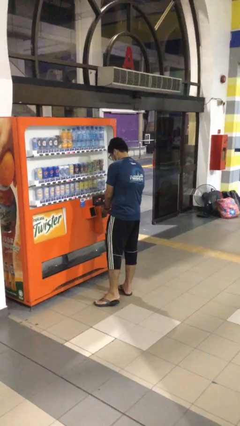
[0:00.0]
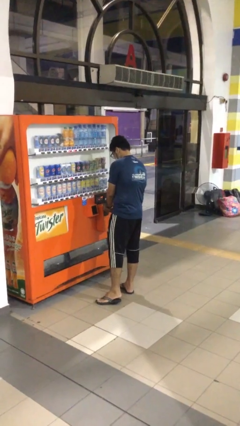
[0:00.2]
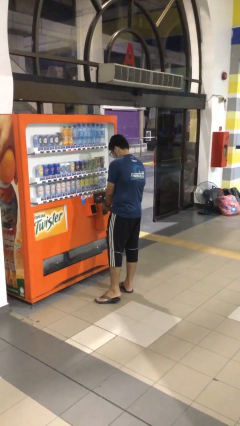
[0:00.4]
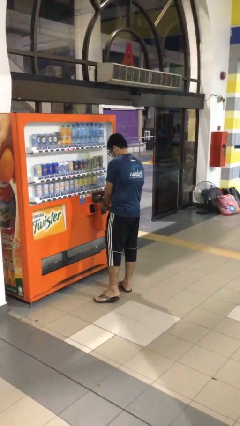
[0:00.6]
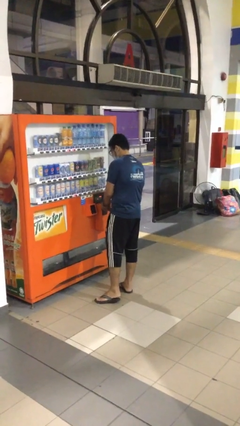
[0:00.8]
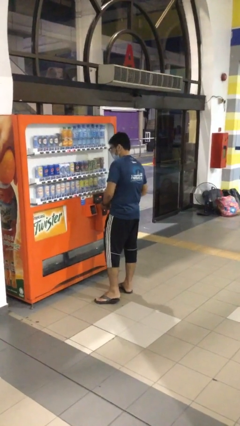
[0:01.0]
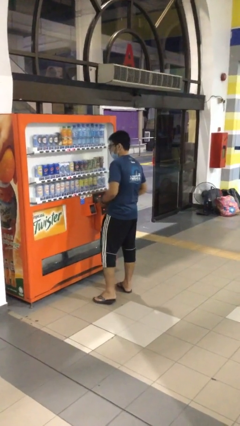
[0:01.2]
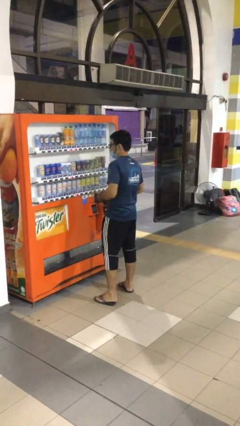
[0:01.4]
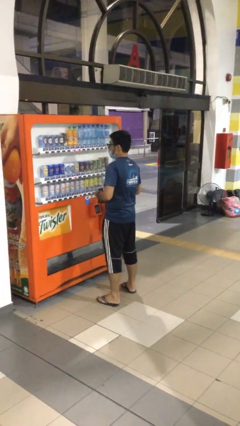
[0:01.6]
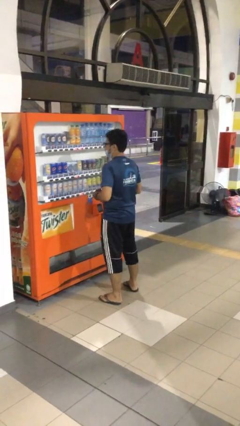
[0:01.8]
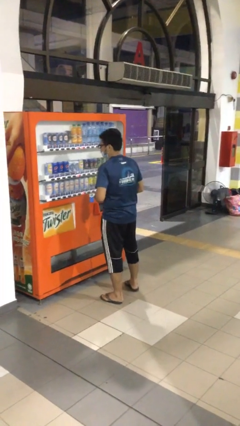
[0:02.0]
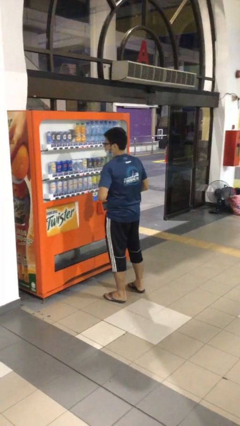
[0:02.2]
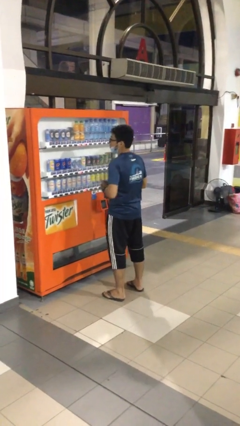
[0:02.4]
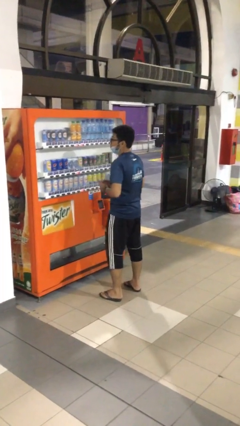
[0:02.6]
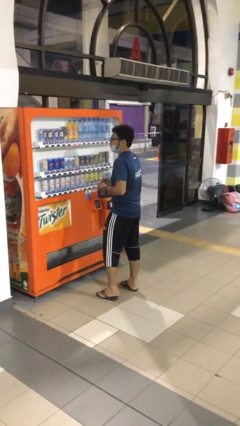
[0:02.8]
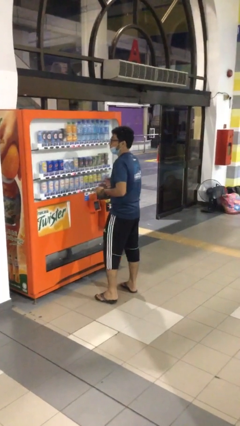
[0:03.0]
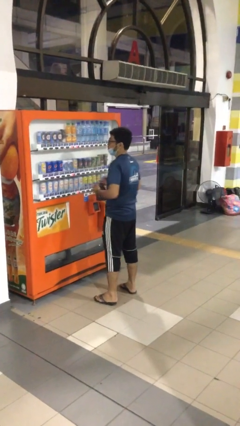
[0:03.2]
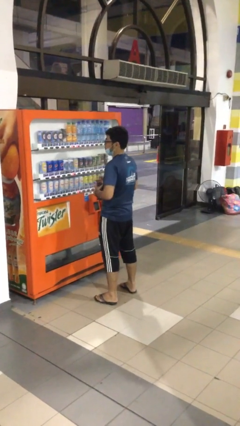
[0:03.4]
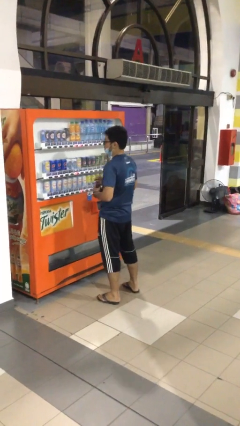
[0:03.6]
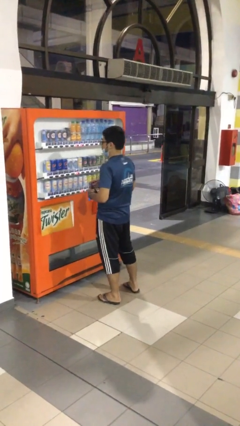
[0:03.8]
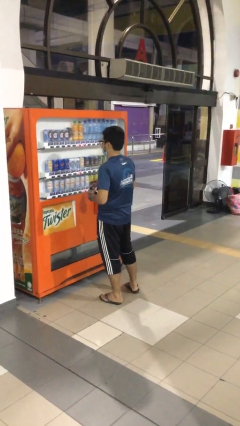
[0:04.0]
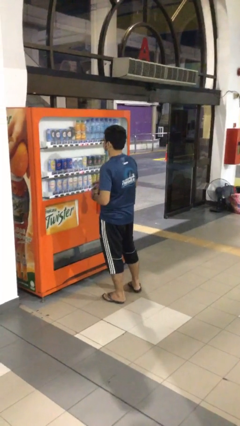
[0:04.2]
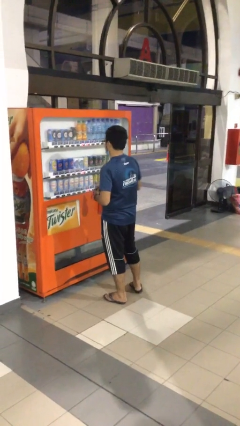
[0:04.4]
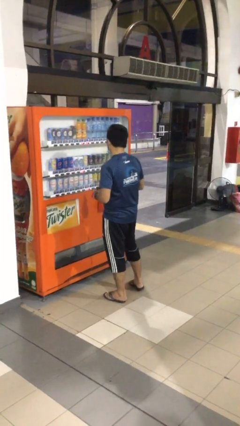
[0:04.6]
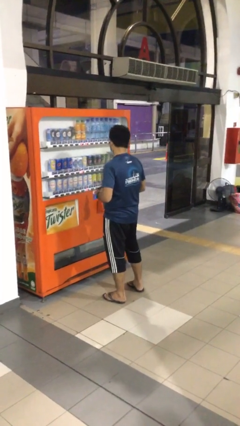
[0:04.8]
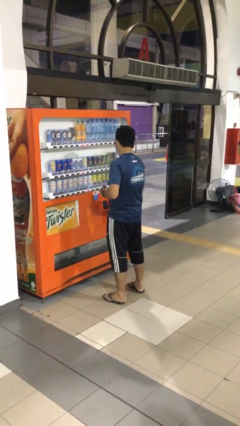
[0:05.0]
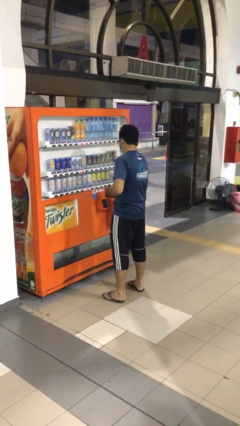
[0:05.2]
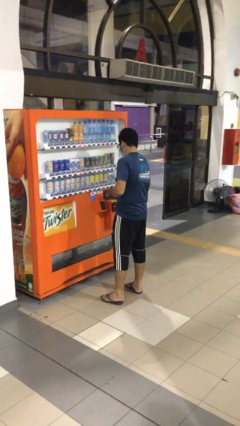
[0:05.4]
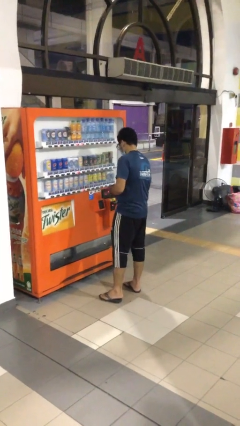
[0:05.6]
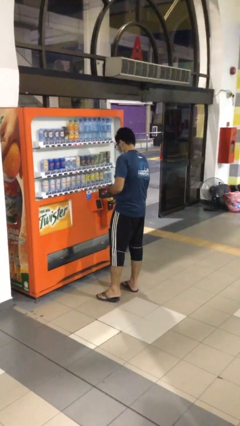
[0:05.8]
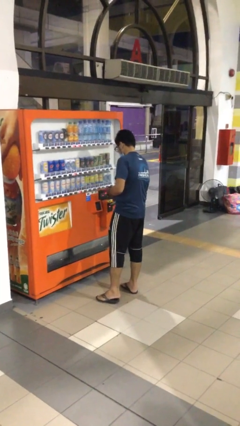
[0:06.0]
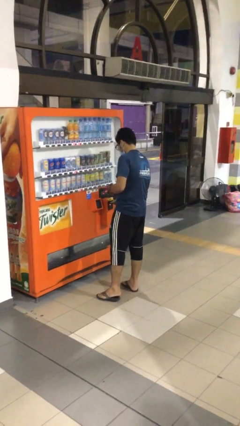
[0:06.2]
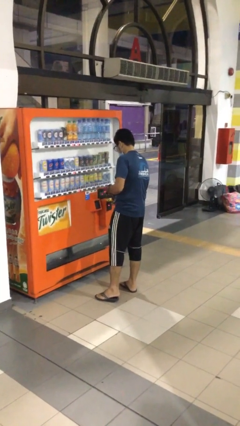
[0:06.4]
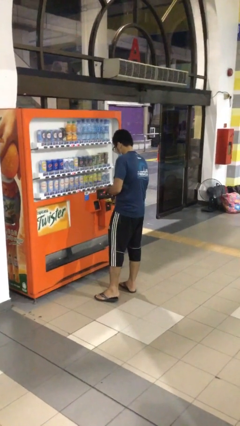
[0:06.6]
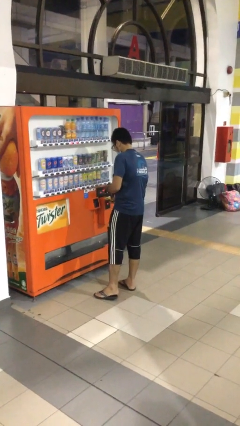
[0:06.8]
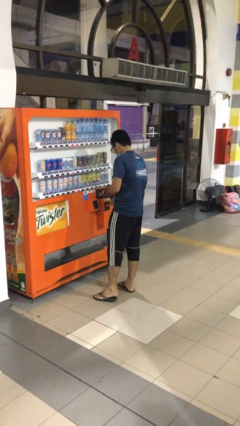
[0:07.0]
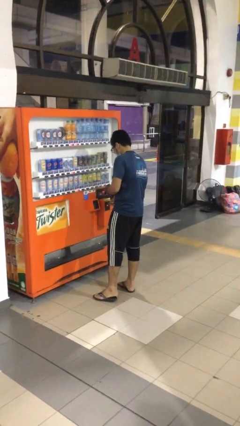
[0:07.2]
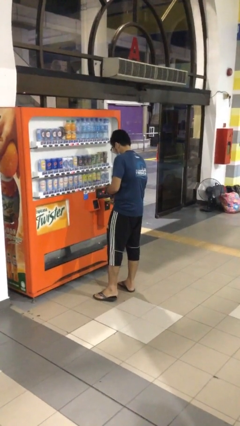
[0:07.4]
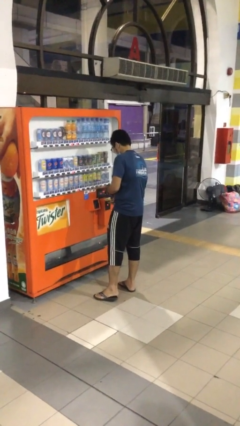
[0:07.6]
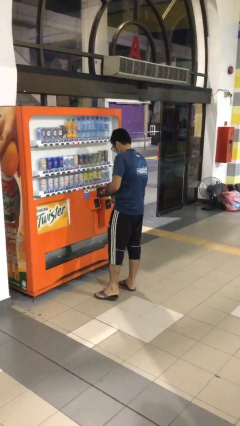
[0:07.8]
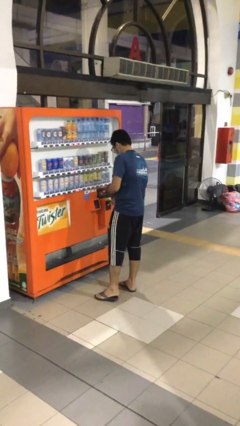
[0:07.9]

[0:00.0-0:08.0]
person purchases from machine

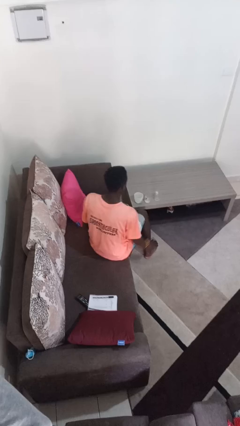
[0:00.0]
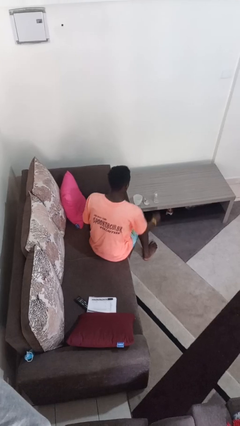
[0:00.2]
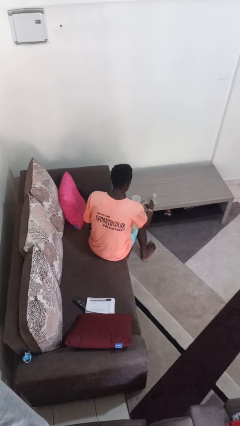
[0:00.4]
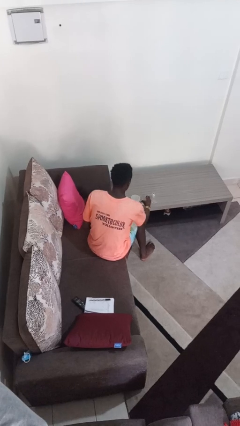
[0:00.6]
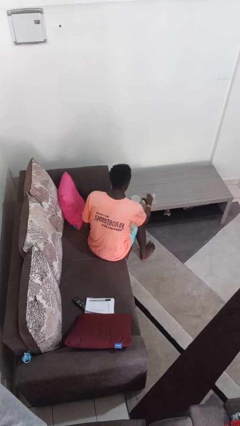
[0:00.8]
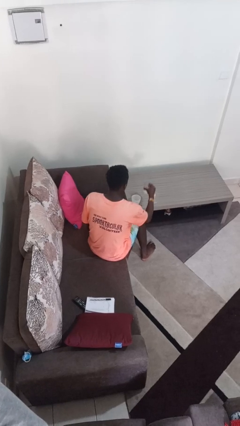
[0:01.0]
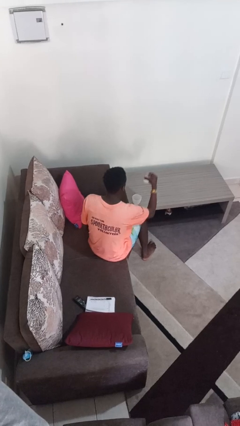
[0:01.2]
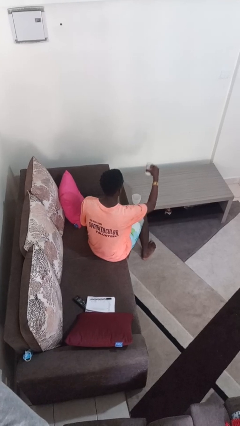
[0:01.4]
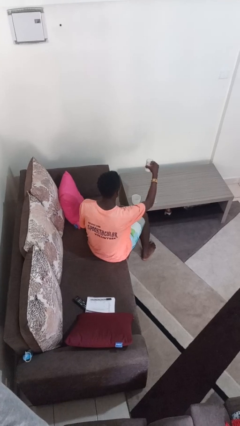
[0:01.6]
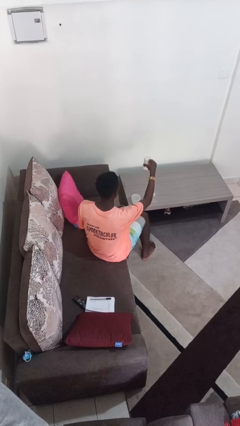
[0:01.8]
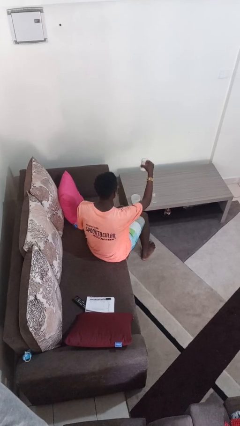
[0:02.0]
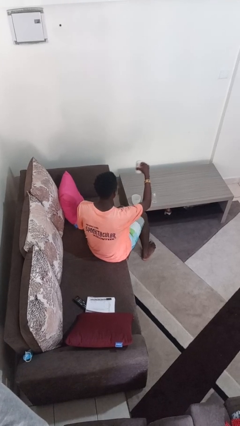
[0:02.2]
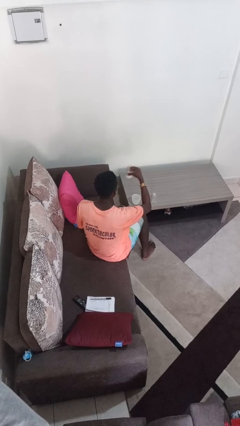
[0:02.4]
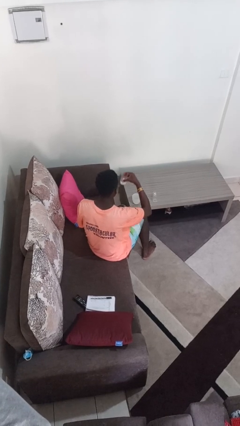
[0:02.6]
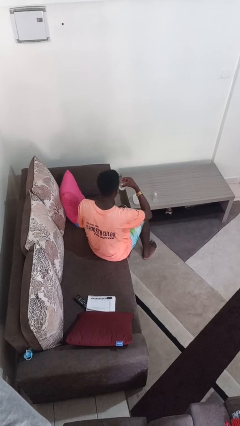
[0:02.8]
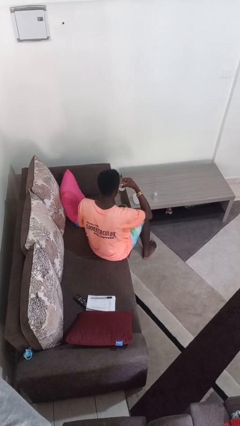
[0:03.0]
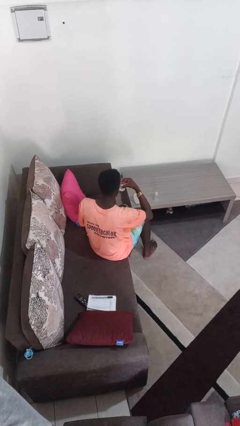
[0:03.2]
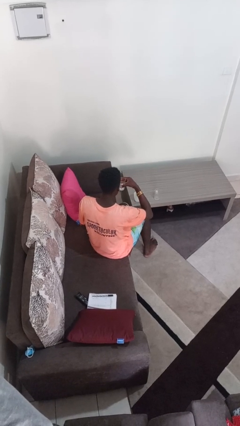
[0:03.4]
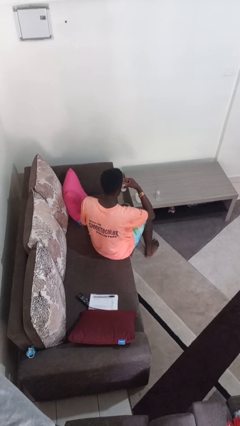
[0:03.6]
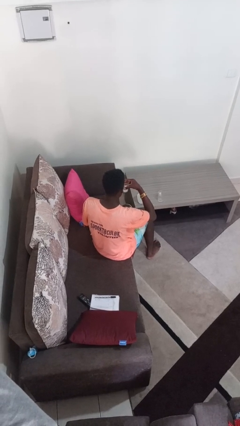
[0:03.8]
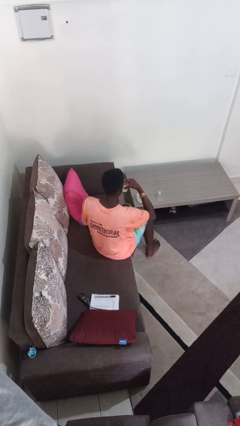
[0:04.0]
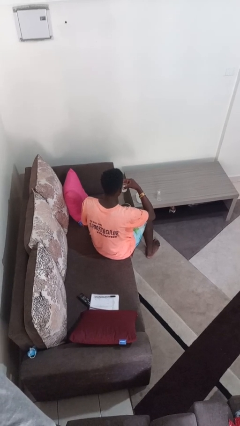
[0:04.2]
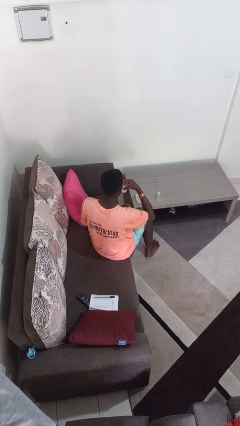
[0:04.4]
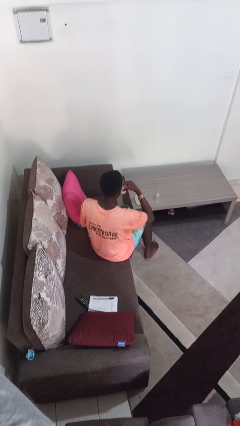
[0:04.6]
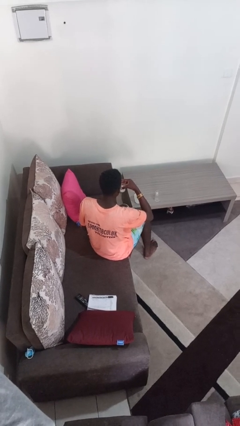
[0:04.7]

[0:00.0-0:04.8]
person picks up object from table

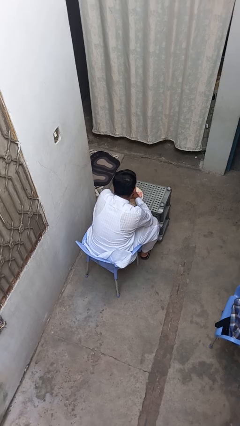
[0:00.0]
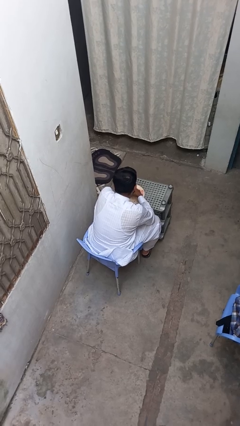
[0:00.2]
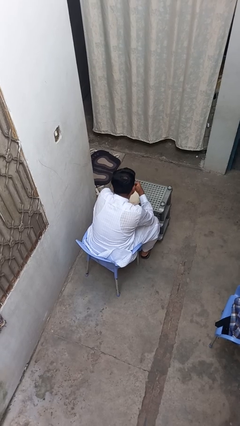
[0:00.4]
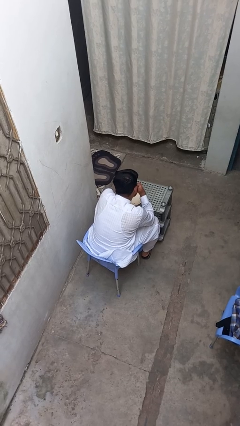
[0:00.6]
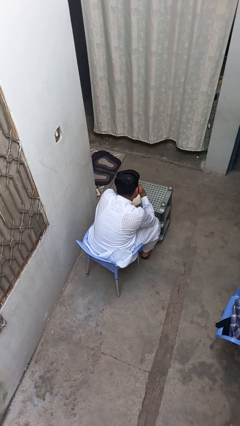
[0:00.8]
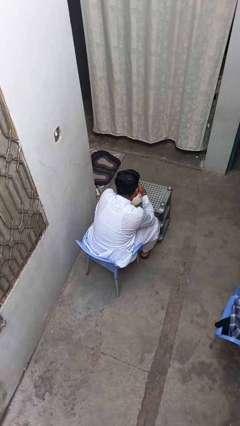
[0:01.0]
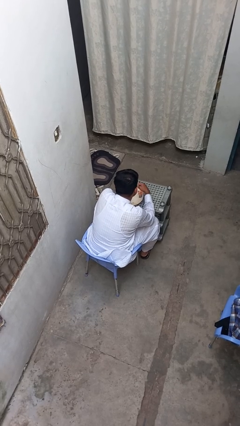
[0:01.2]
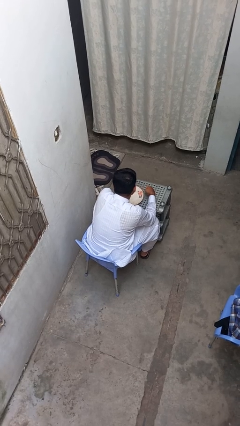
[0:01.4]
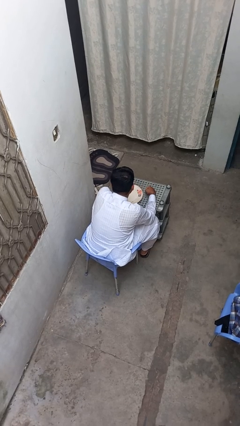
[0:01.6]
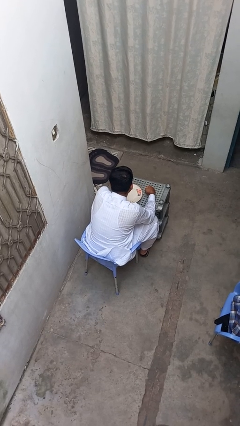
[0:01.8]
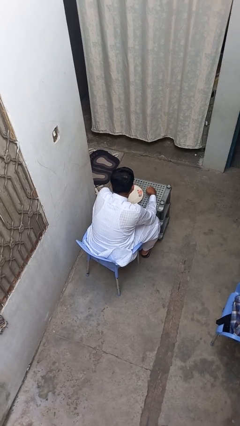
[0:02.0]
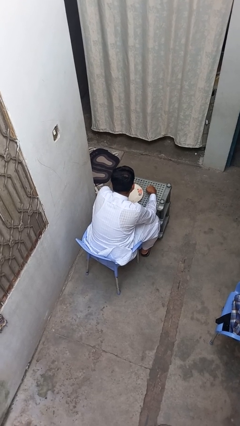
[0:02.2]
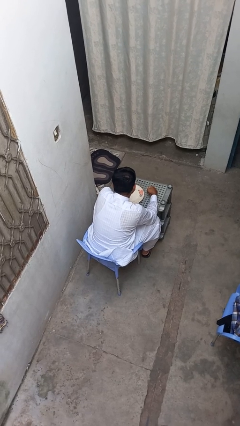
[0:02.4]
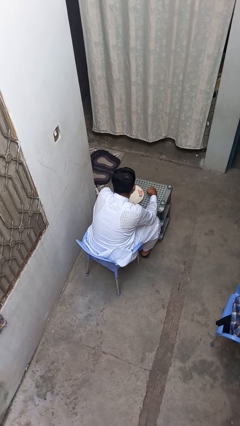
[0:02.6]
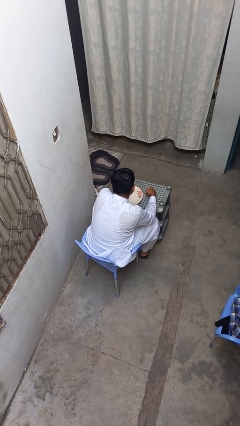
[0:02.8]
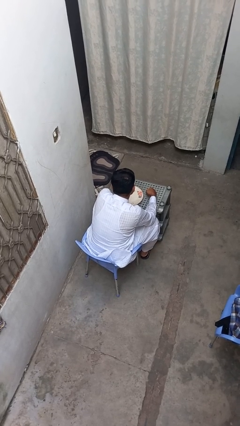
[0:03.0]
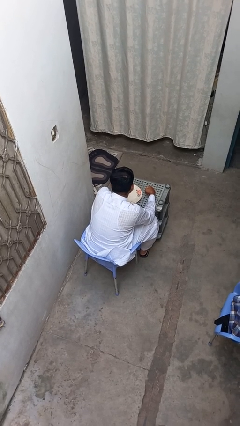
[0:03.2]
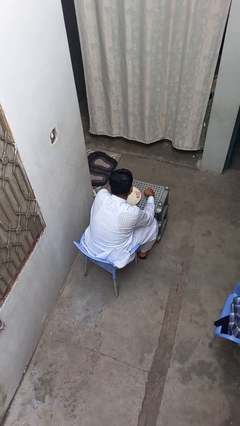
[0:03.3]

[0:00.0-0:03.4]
person eats with hands

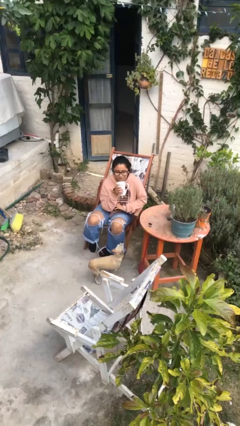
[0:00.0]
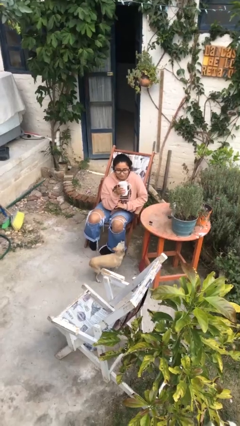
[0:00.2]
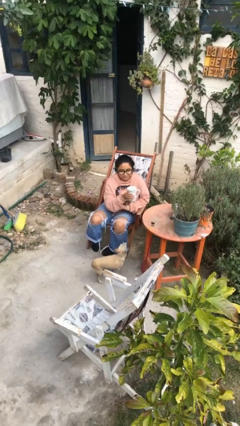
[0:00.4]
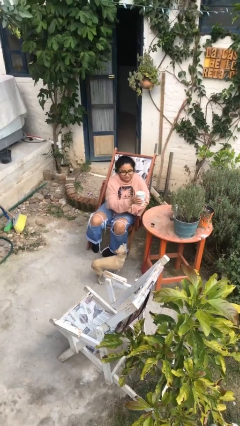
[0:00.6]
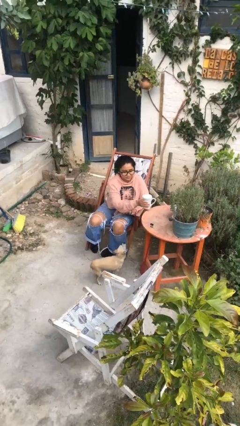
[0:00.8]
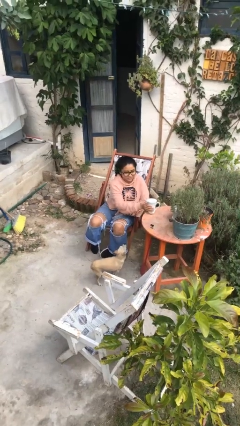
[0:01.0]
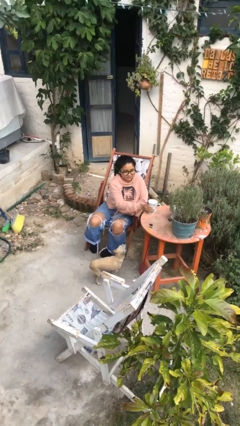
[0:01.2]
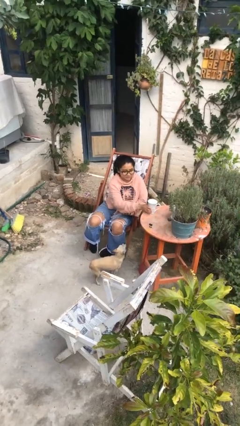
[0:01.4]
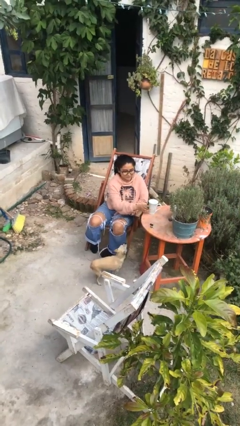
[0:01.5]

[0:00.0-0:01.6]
person puts down object on table
